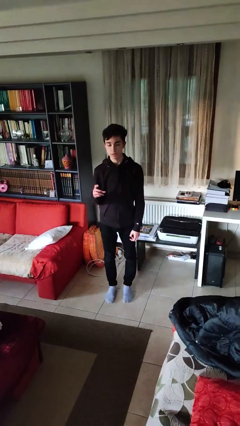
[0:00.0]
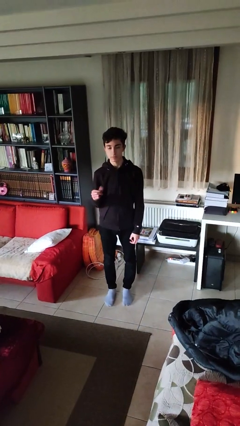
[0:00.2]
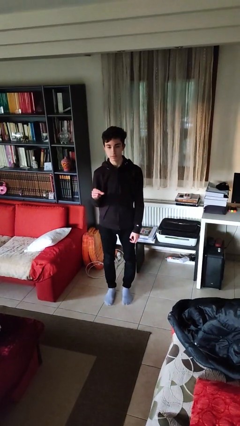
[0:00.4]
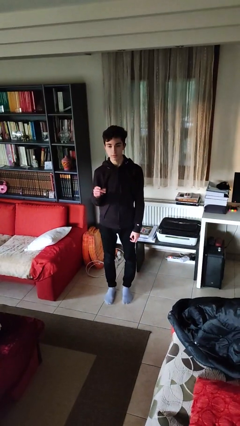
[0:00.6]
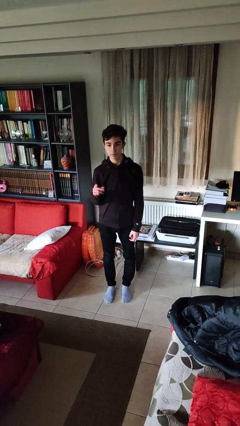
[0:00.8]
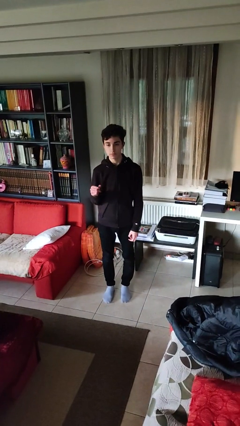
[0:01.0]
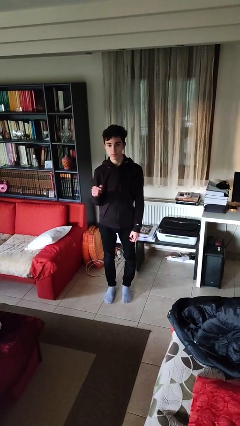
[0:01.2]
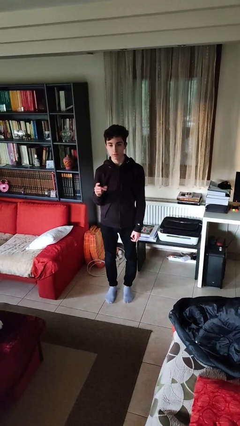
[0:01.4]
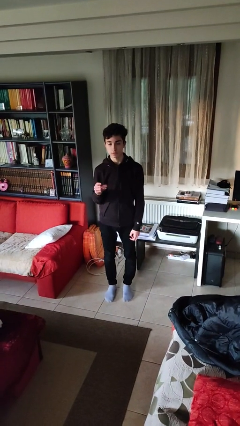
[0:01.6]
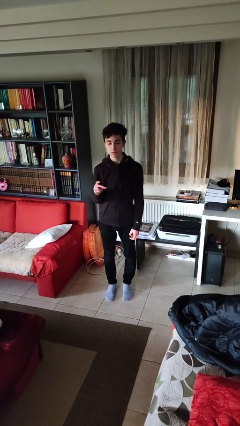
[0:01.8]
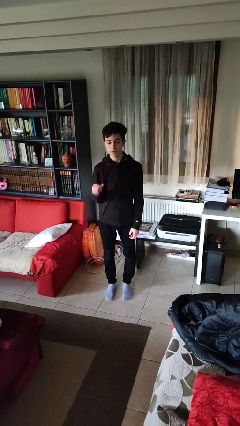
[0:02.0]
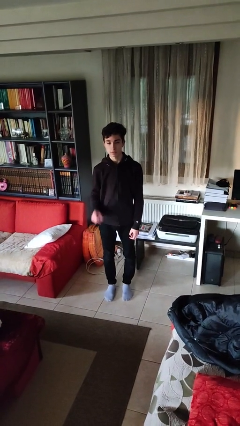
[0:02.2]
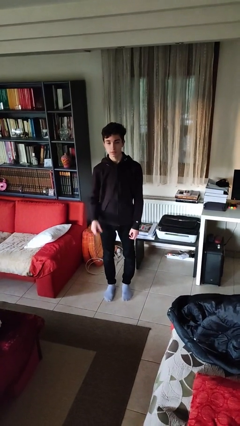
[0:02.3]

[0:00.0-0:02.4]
person snaps fingers

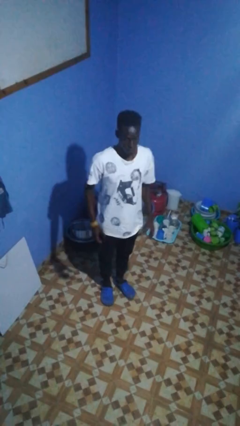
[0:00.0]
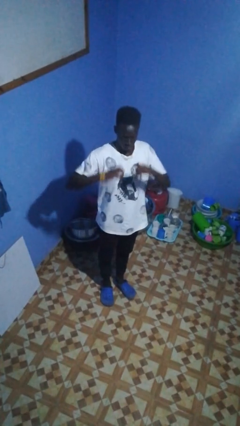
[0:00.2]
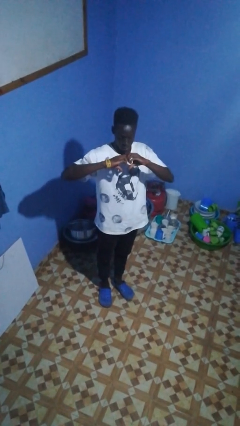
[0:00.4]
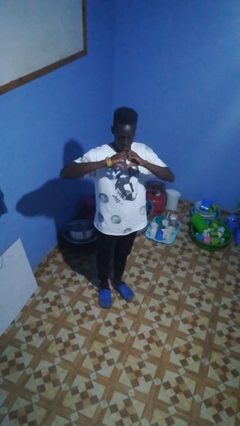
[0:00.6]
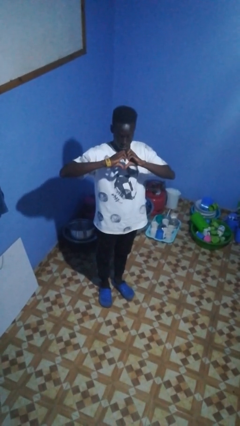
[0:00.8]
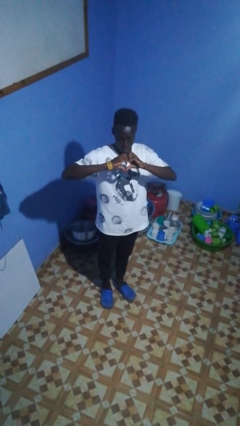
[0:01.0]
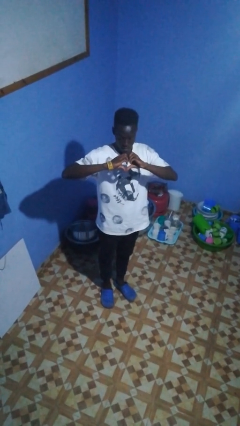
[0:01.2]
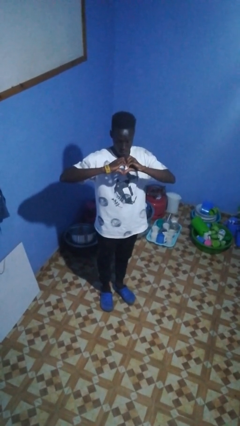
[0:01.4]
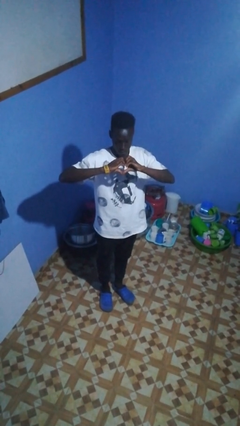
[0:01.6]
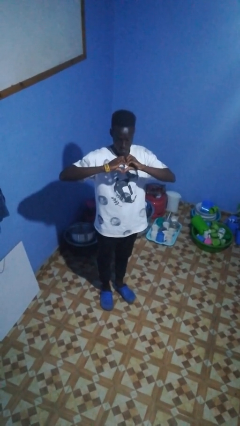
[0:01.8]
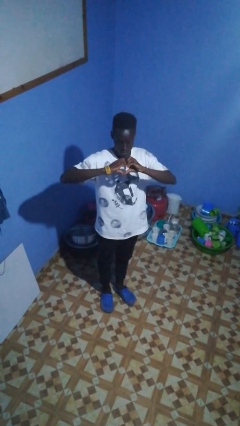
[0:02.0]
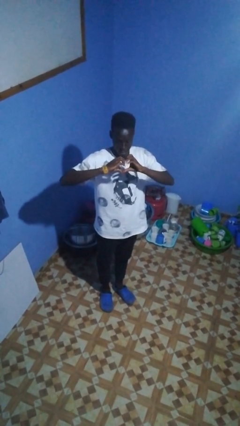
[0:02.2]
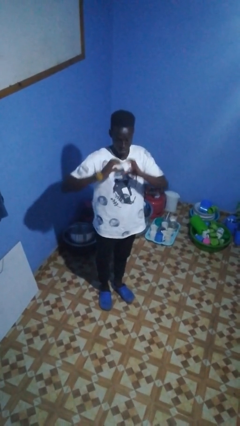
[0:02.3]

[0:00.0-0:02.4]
person gestures heart

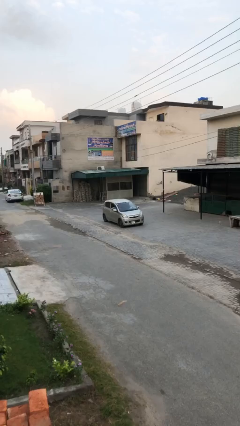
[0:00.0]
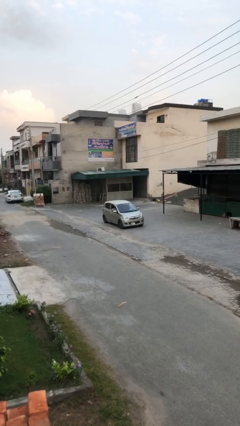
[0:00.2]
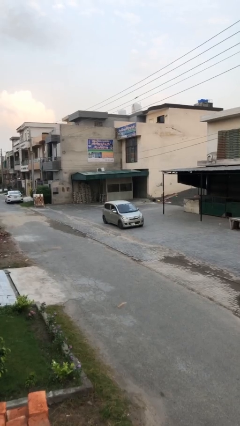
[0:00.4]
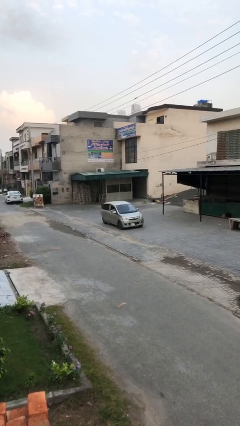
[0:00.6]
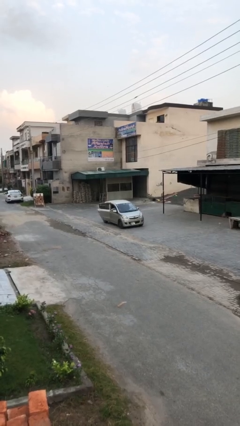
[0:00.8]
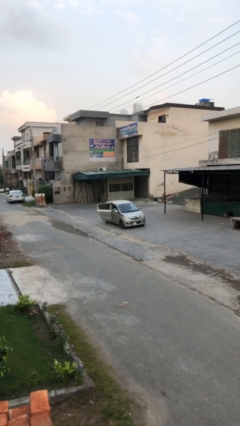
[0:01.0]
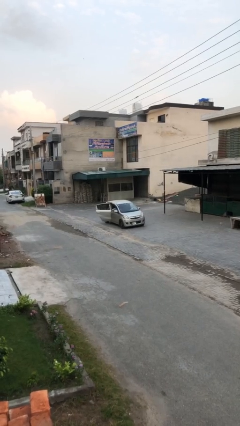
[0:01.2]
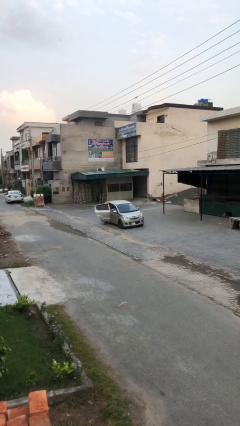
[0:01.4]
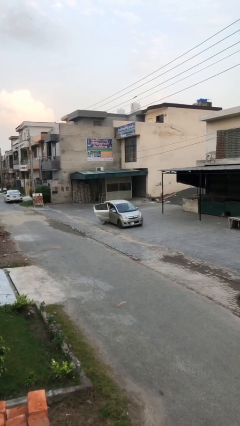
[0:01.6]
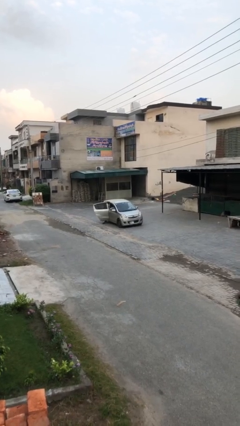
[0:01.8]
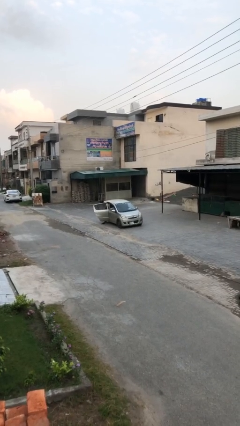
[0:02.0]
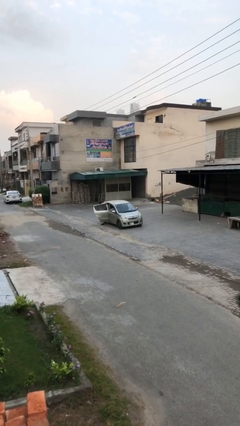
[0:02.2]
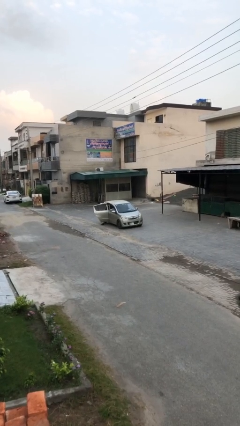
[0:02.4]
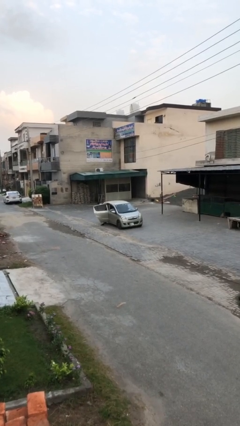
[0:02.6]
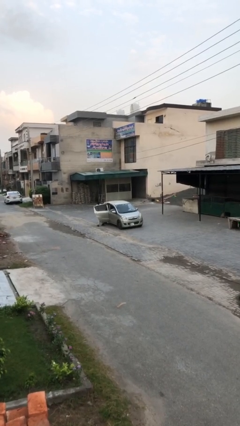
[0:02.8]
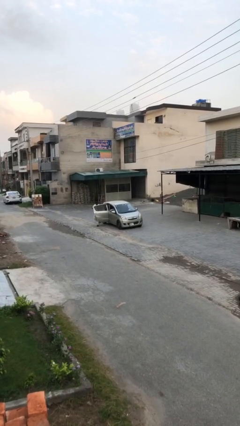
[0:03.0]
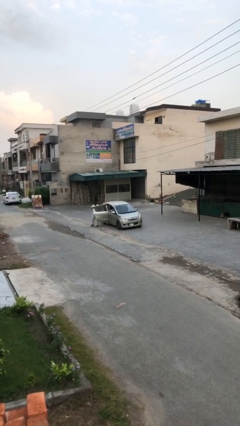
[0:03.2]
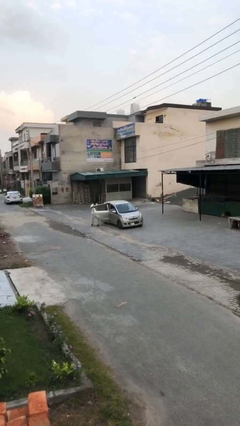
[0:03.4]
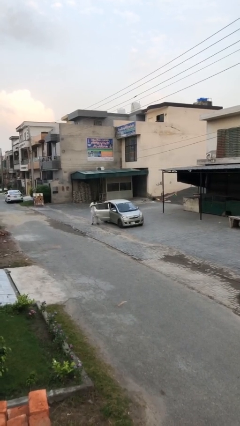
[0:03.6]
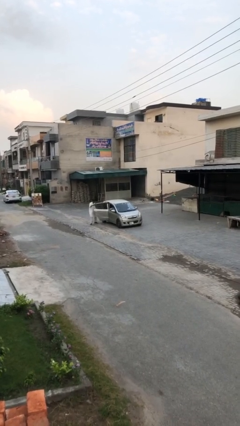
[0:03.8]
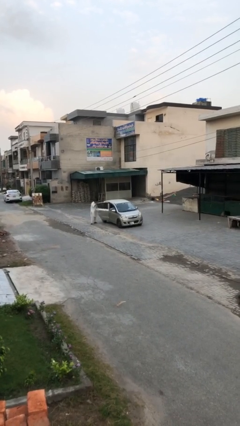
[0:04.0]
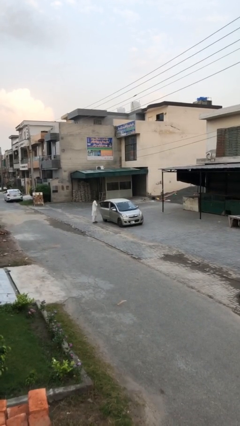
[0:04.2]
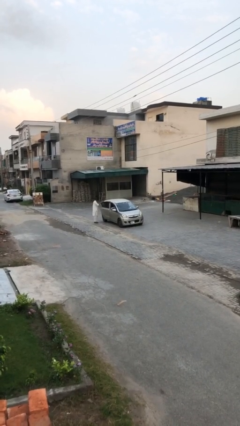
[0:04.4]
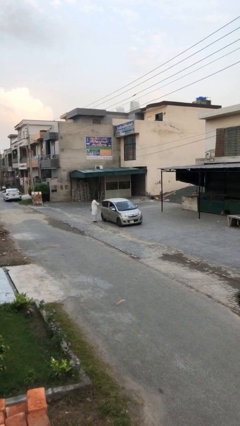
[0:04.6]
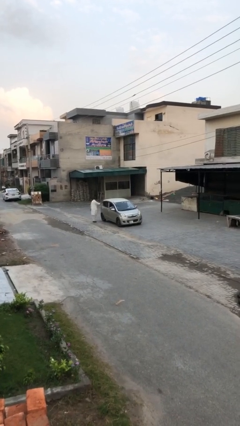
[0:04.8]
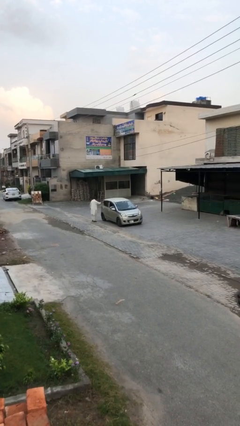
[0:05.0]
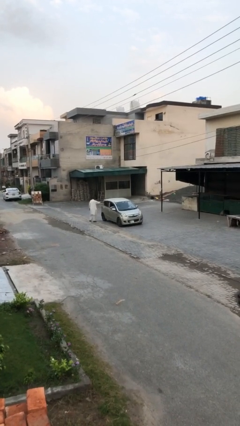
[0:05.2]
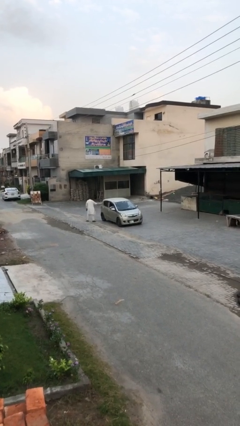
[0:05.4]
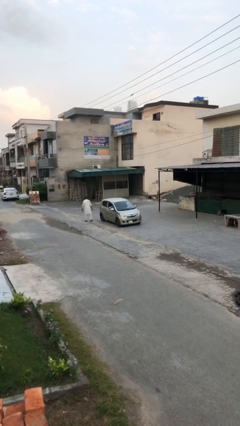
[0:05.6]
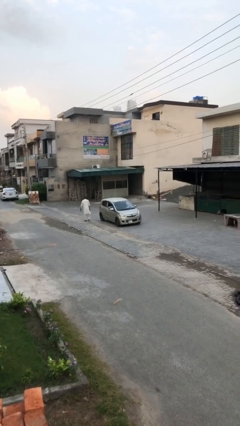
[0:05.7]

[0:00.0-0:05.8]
car drops off person

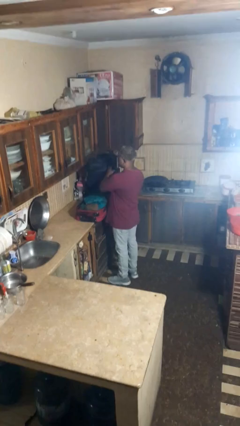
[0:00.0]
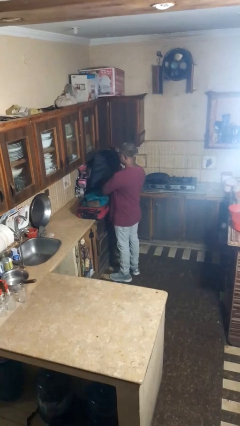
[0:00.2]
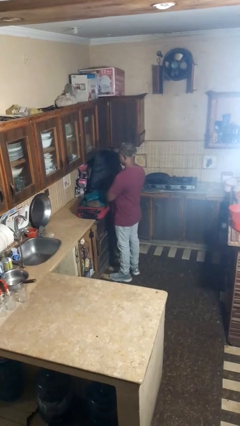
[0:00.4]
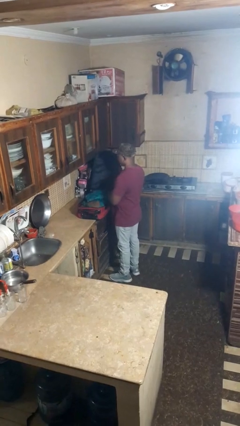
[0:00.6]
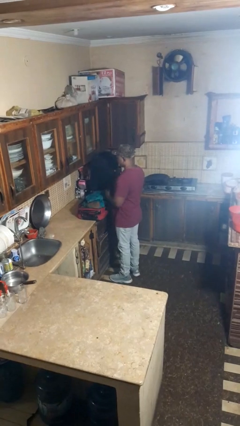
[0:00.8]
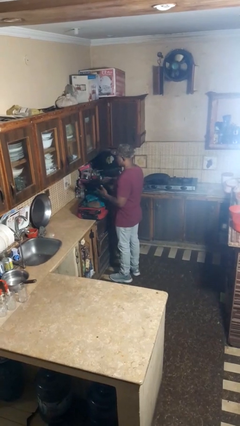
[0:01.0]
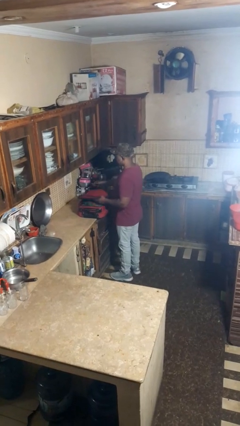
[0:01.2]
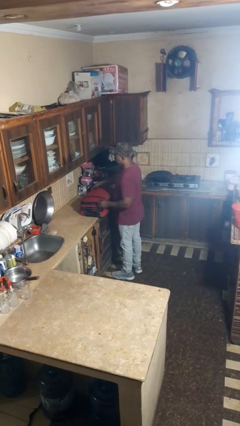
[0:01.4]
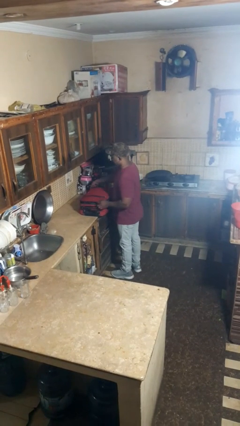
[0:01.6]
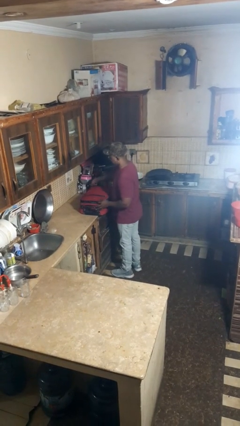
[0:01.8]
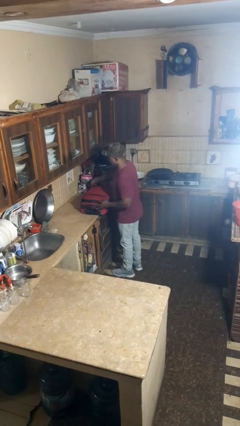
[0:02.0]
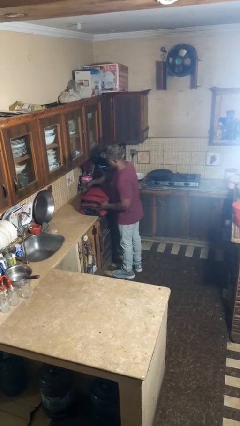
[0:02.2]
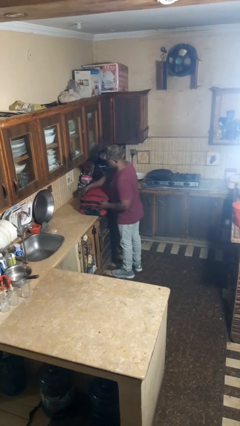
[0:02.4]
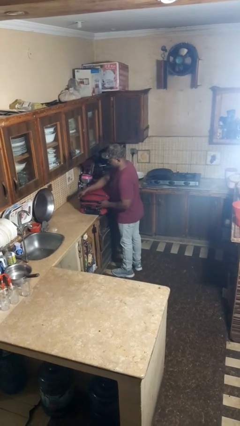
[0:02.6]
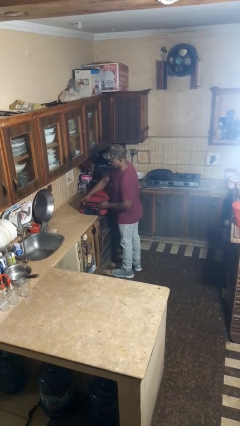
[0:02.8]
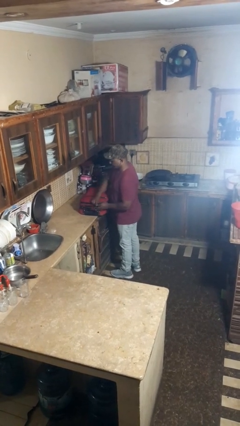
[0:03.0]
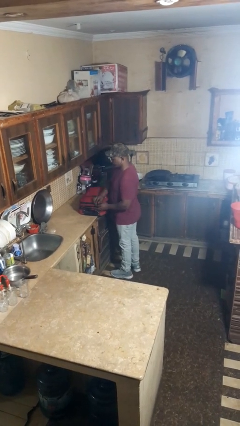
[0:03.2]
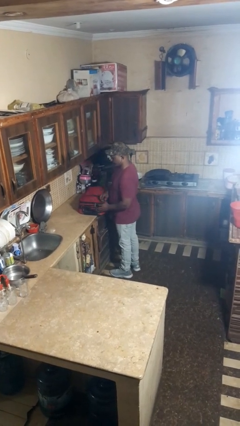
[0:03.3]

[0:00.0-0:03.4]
person closes suitcase

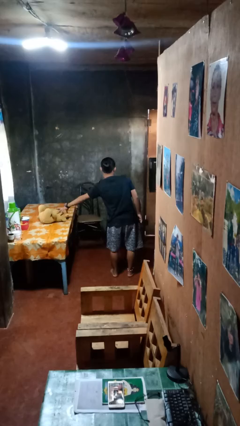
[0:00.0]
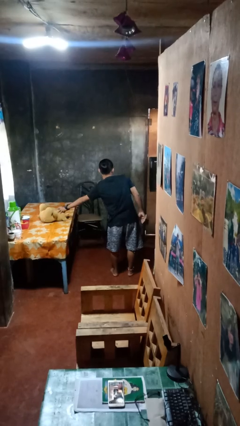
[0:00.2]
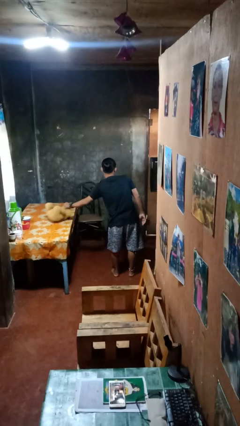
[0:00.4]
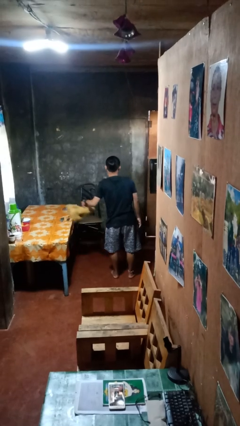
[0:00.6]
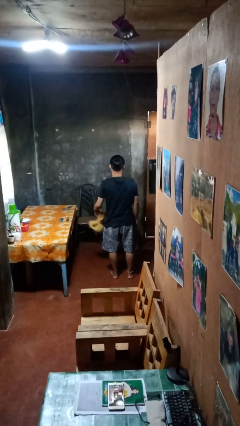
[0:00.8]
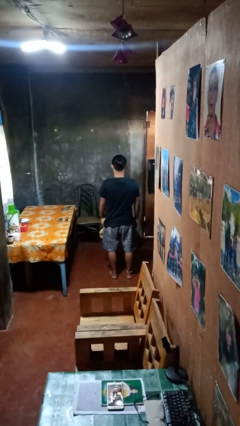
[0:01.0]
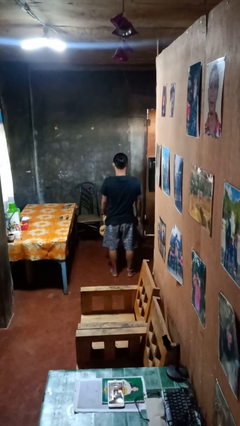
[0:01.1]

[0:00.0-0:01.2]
person picks up object from table

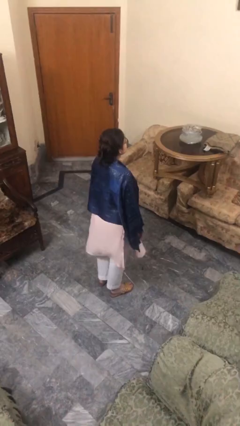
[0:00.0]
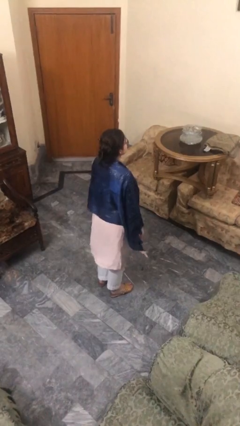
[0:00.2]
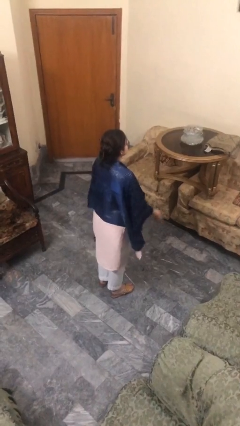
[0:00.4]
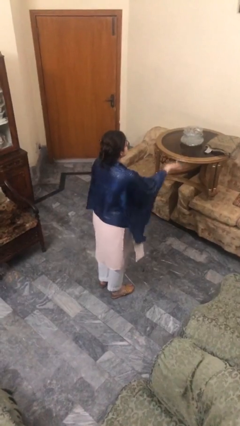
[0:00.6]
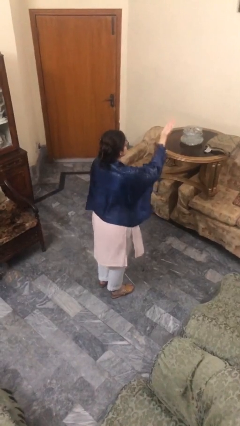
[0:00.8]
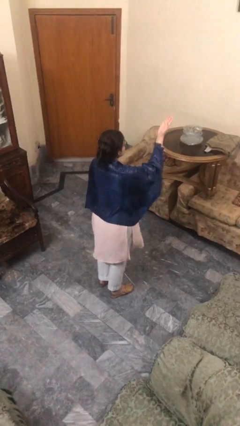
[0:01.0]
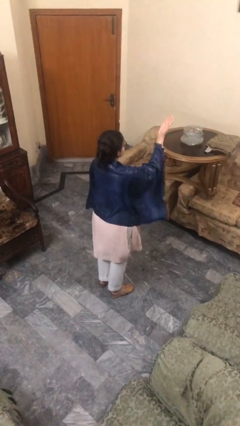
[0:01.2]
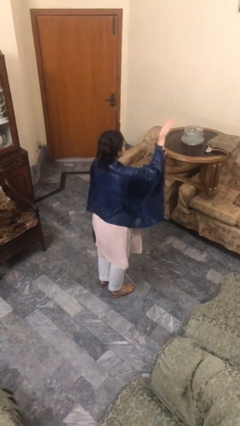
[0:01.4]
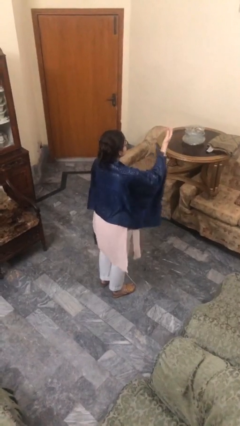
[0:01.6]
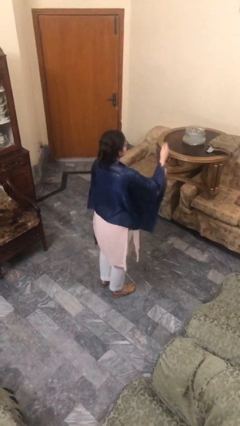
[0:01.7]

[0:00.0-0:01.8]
person gestures swipe up

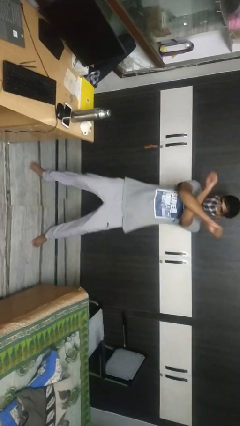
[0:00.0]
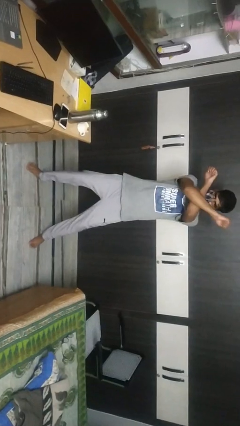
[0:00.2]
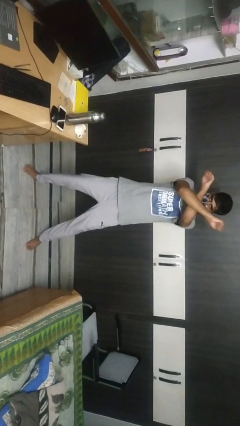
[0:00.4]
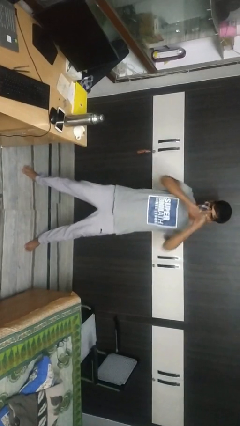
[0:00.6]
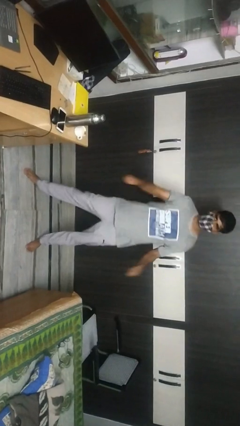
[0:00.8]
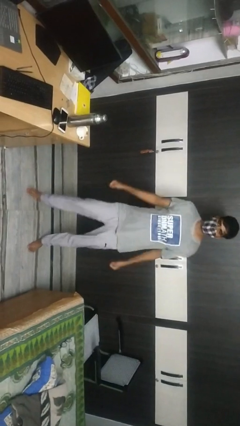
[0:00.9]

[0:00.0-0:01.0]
person gestures arms x
